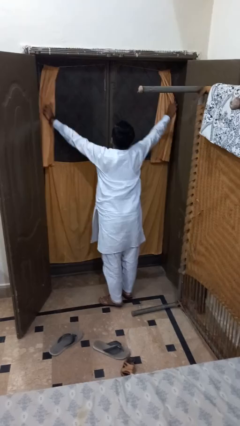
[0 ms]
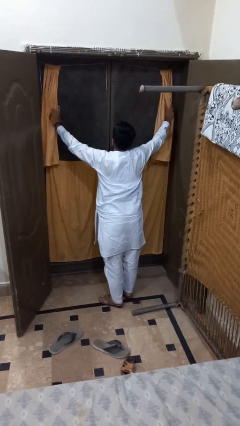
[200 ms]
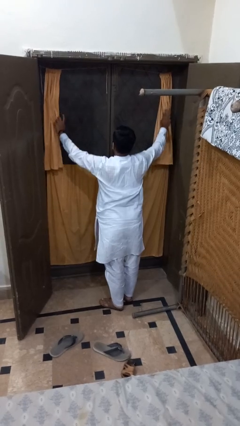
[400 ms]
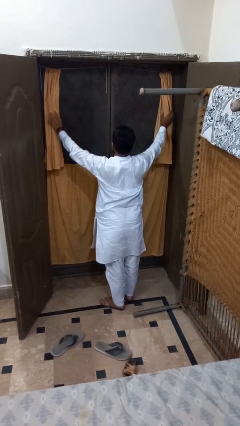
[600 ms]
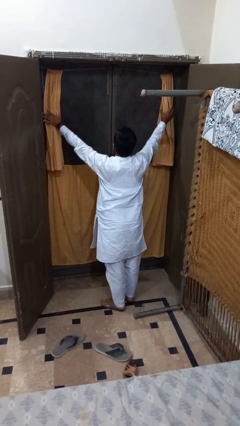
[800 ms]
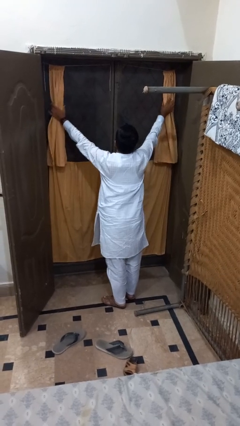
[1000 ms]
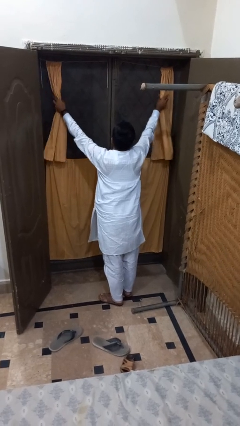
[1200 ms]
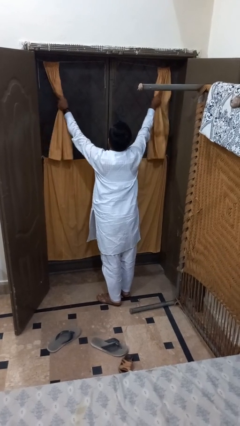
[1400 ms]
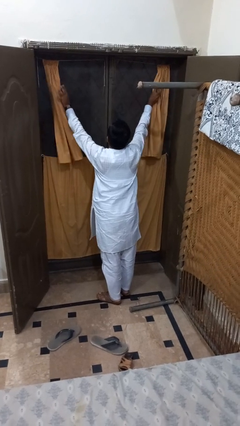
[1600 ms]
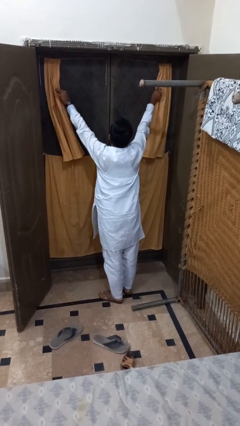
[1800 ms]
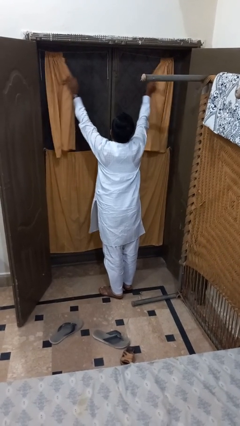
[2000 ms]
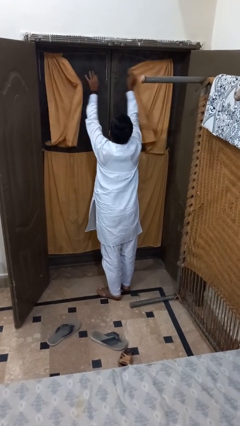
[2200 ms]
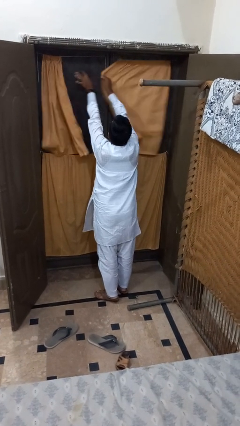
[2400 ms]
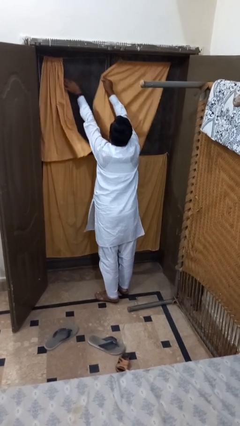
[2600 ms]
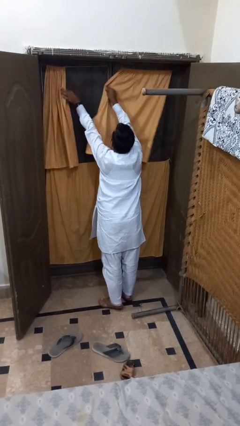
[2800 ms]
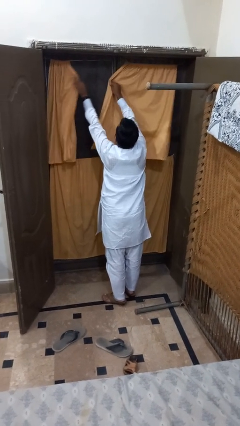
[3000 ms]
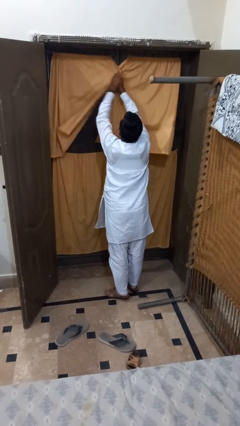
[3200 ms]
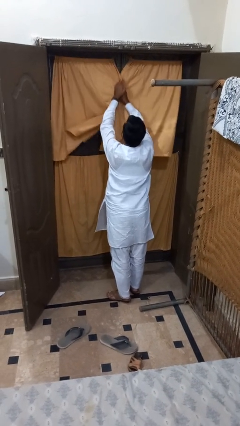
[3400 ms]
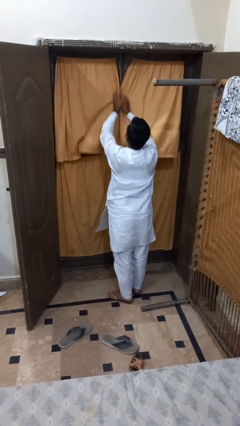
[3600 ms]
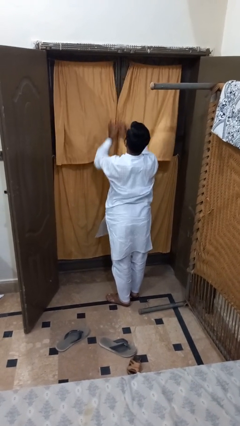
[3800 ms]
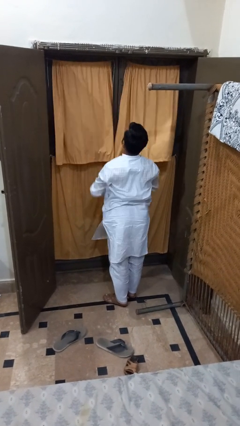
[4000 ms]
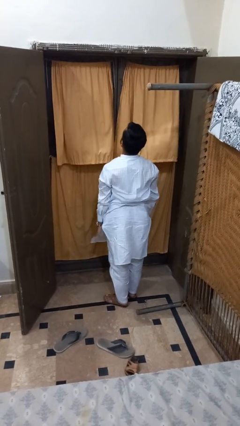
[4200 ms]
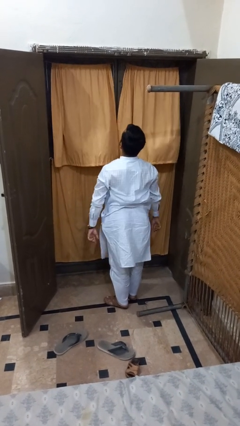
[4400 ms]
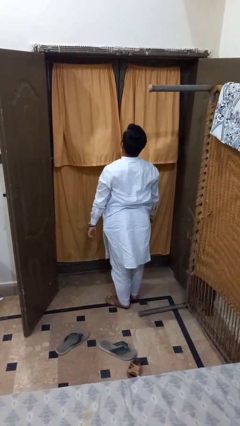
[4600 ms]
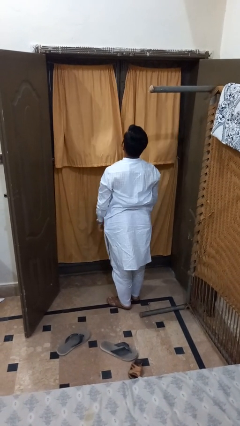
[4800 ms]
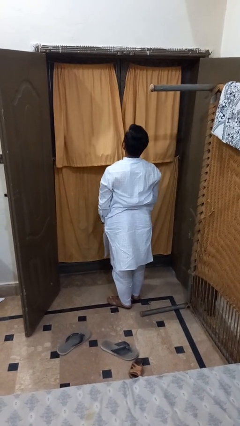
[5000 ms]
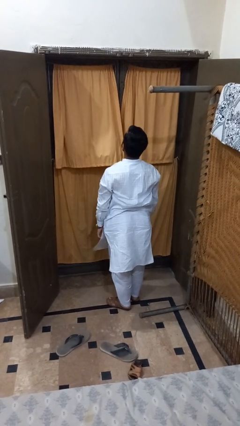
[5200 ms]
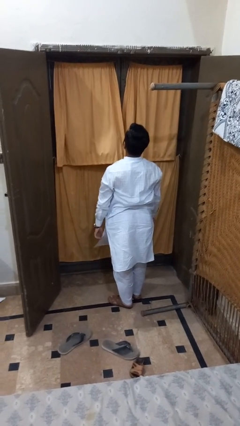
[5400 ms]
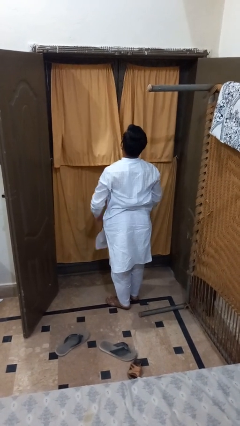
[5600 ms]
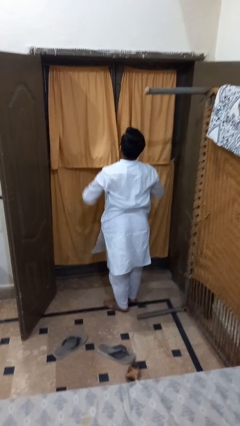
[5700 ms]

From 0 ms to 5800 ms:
person closes curtains

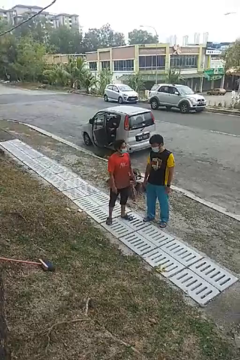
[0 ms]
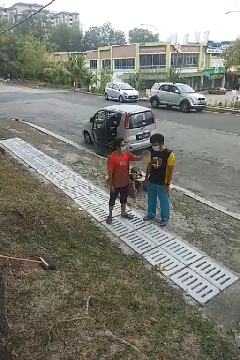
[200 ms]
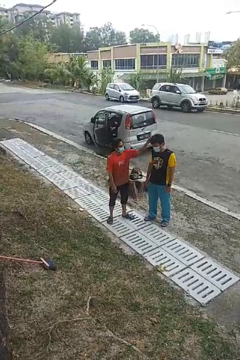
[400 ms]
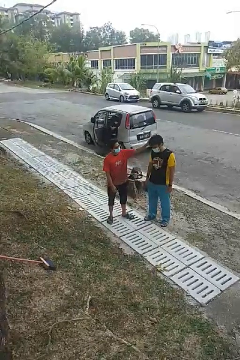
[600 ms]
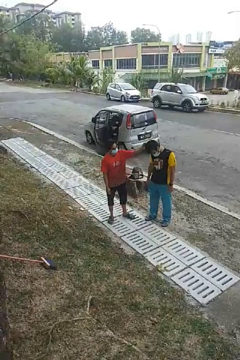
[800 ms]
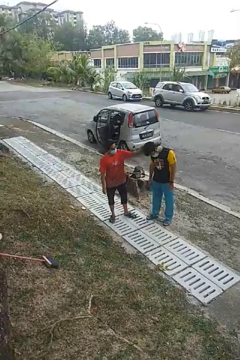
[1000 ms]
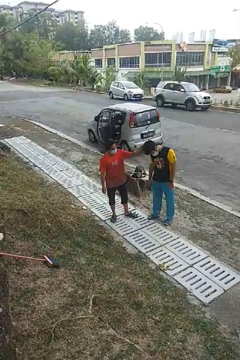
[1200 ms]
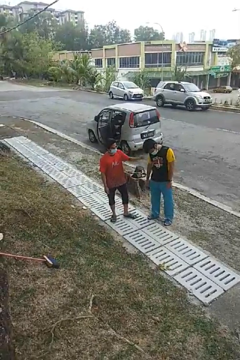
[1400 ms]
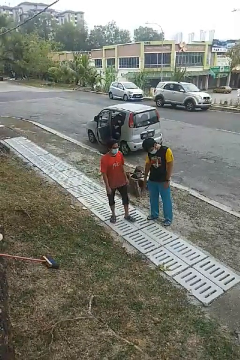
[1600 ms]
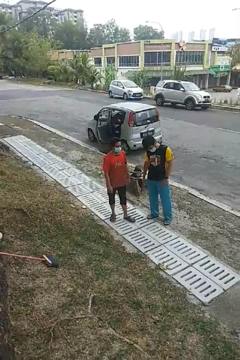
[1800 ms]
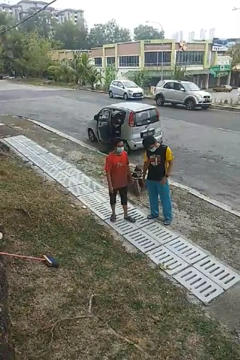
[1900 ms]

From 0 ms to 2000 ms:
person grabs person by hair

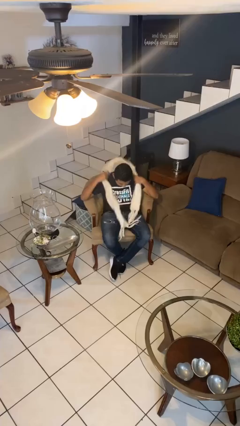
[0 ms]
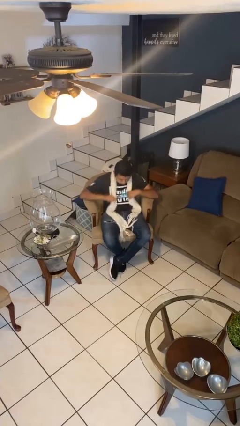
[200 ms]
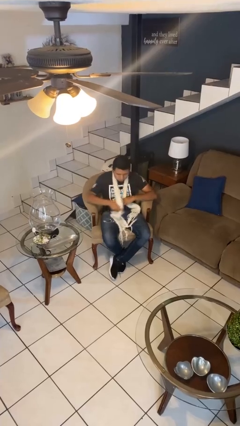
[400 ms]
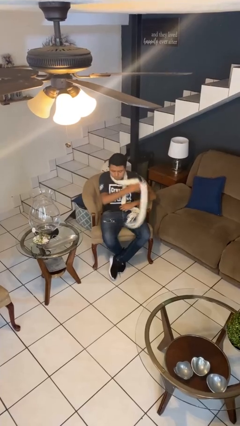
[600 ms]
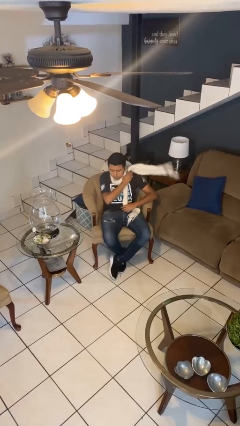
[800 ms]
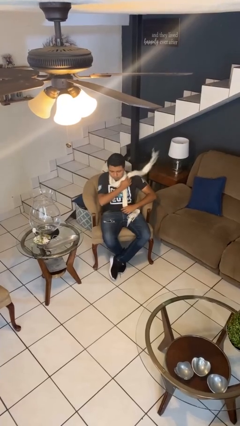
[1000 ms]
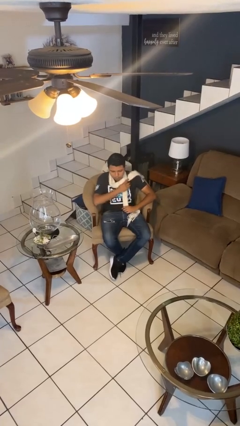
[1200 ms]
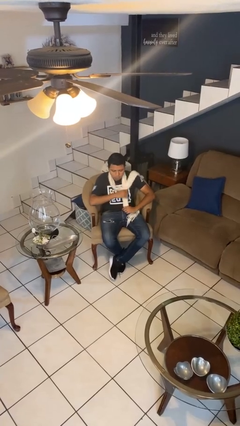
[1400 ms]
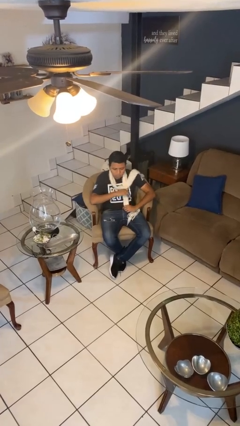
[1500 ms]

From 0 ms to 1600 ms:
person puts on scarf

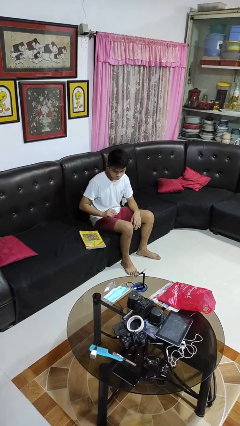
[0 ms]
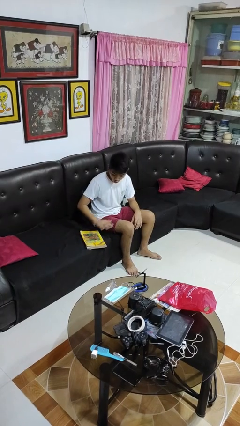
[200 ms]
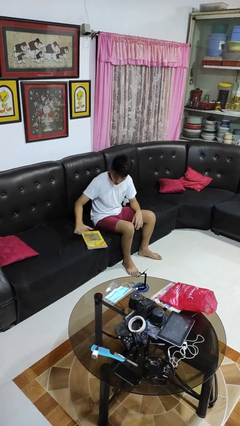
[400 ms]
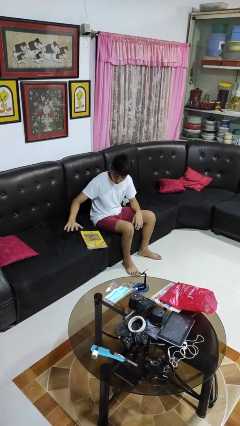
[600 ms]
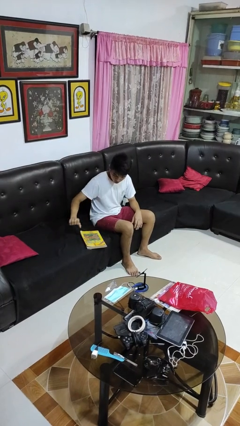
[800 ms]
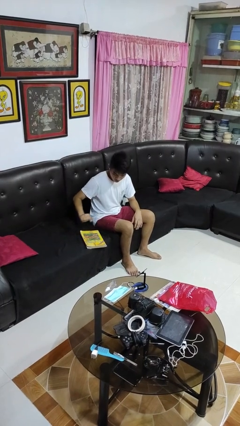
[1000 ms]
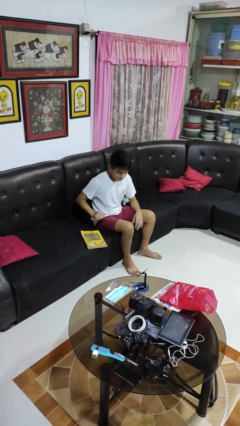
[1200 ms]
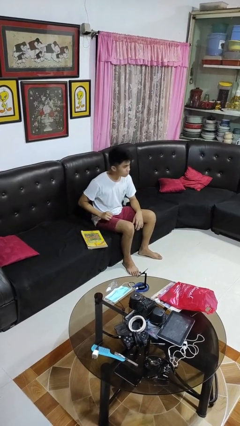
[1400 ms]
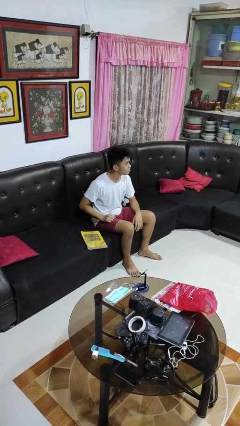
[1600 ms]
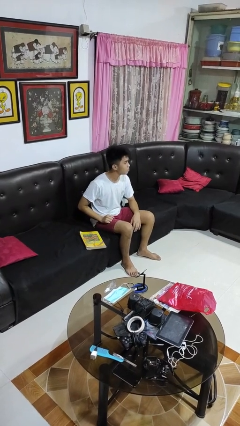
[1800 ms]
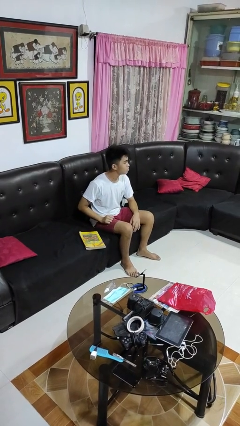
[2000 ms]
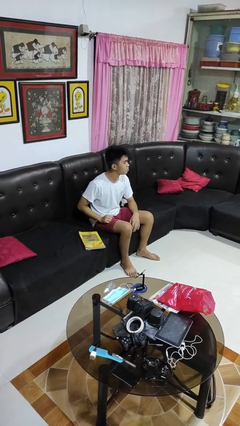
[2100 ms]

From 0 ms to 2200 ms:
person waves hand over object

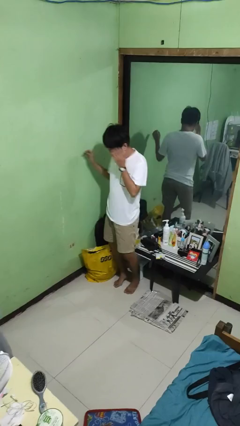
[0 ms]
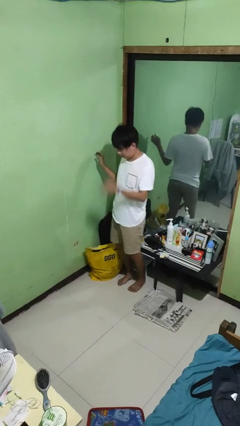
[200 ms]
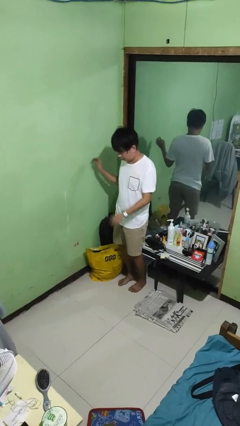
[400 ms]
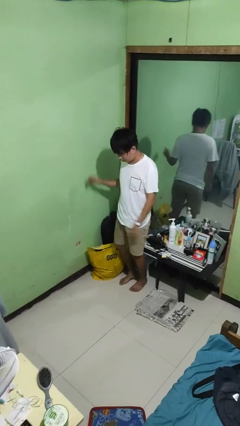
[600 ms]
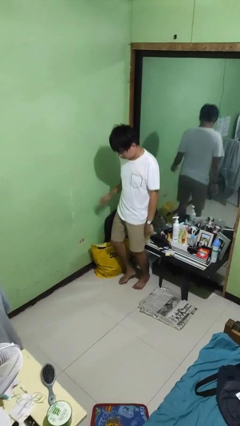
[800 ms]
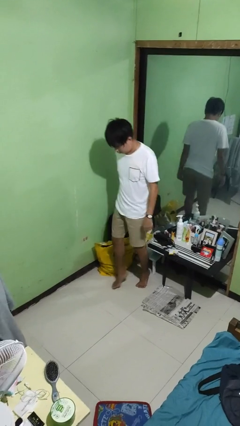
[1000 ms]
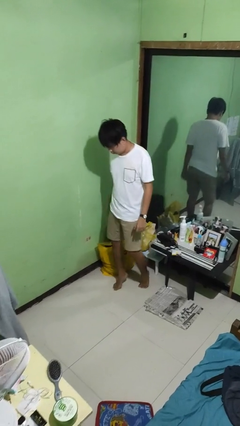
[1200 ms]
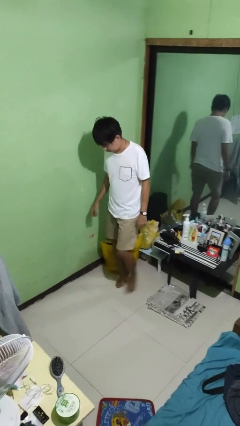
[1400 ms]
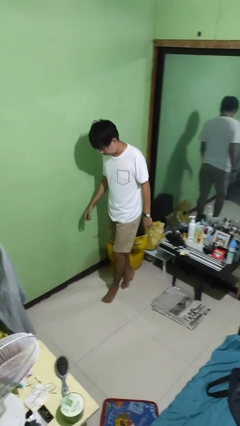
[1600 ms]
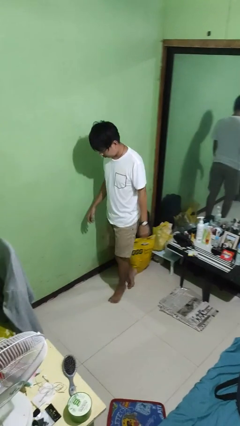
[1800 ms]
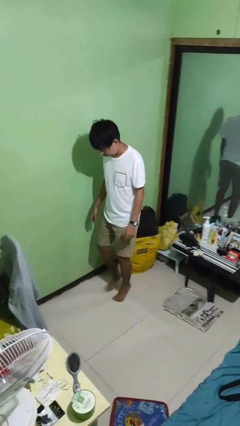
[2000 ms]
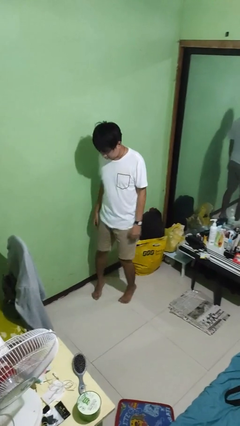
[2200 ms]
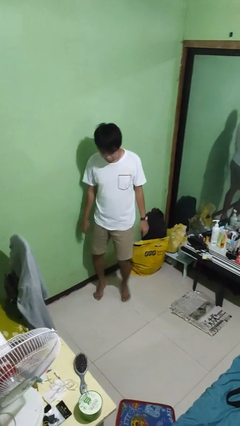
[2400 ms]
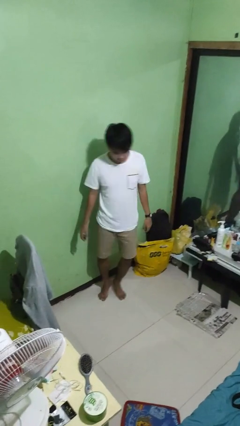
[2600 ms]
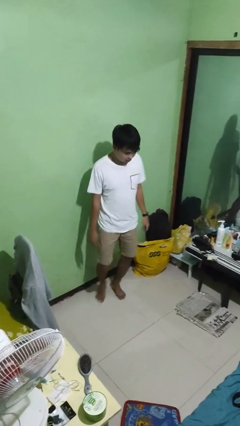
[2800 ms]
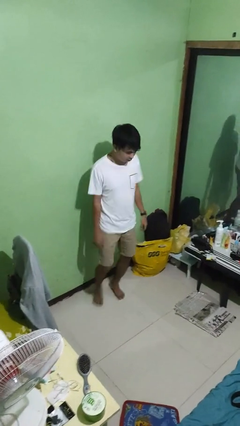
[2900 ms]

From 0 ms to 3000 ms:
person walks tiptoe

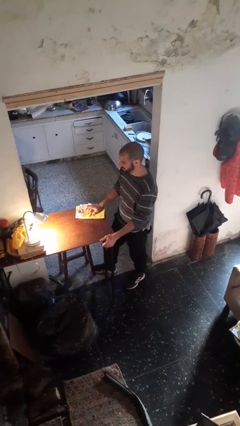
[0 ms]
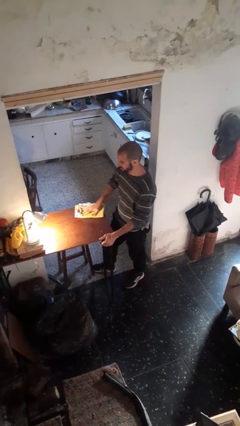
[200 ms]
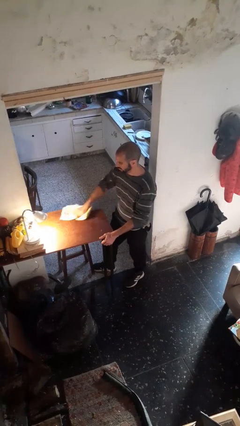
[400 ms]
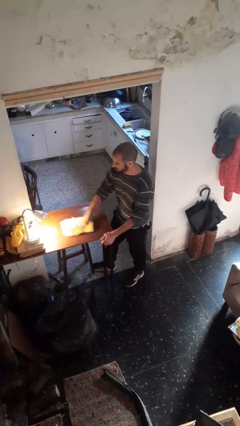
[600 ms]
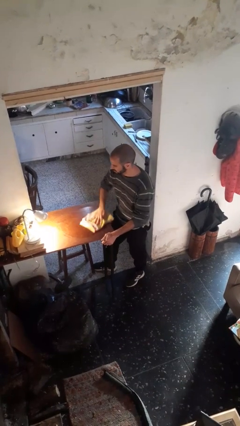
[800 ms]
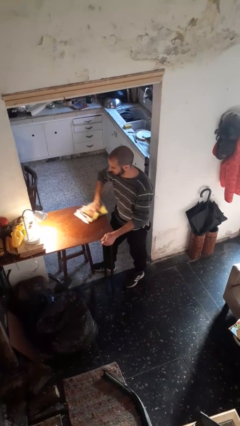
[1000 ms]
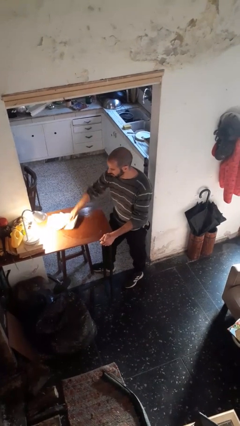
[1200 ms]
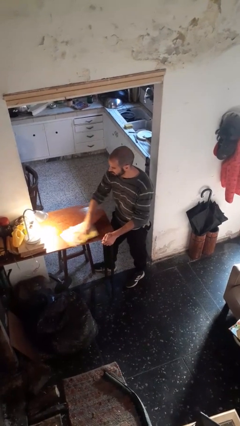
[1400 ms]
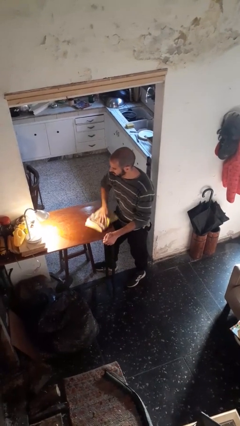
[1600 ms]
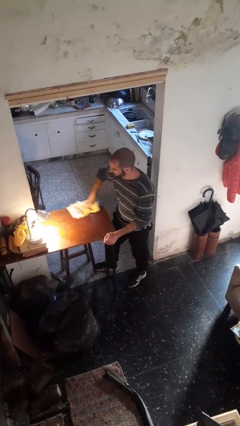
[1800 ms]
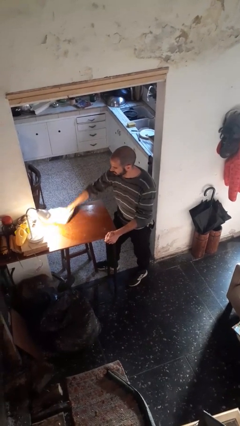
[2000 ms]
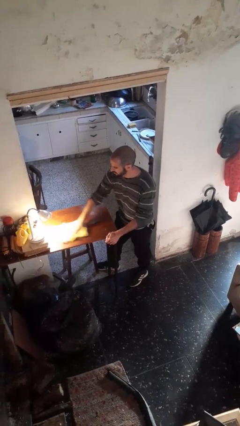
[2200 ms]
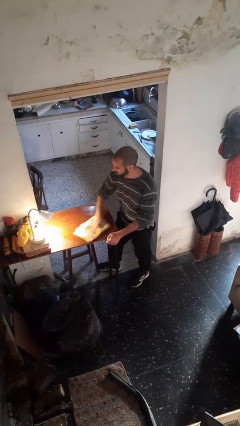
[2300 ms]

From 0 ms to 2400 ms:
person cleans table with rag

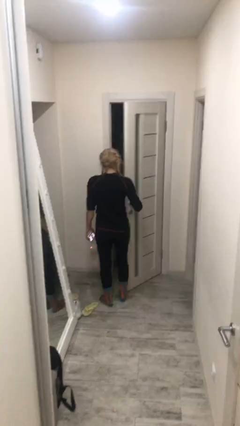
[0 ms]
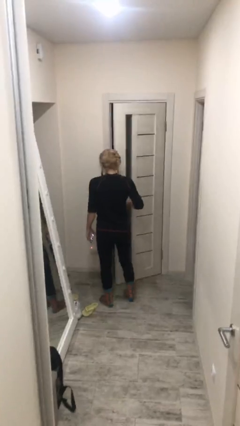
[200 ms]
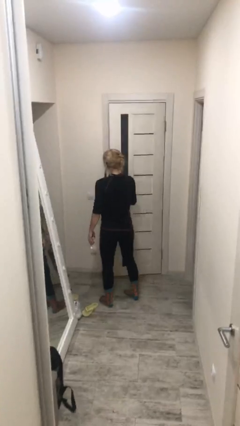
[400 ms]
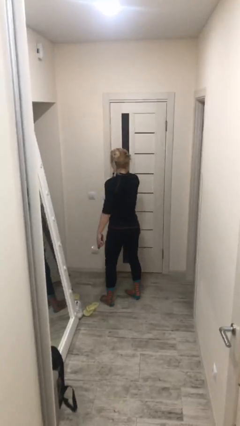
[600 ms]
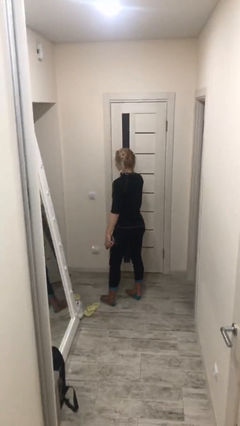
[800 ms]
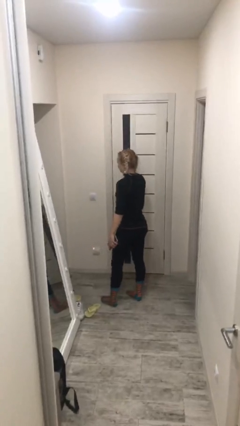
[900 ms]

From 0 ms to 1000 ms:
person closes facility door
